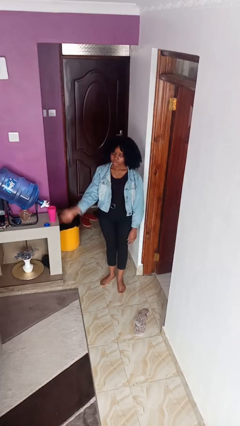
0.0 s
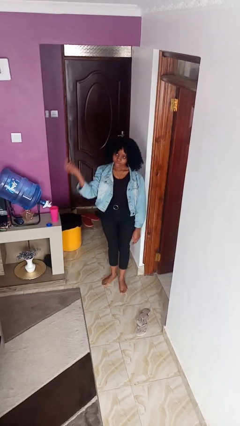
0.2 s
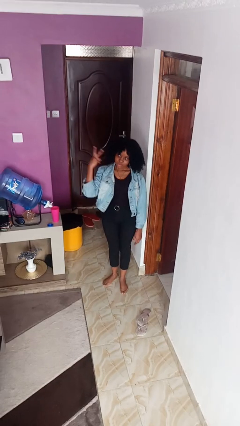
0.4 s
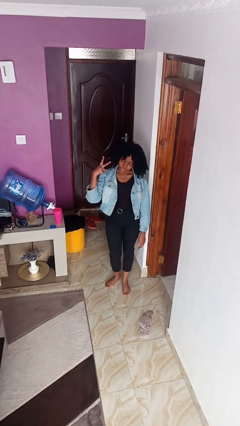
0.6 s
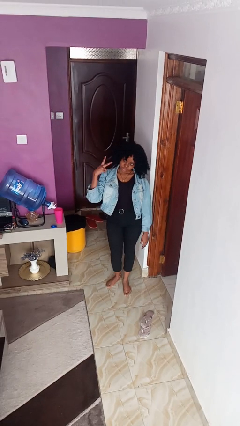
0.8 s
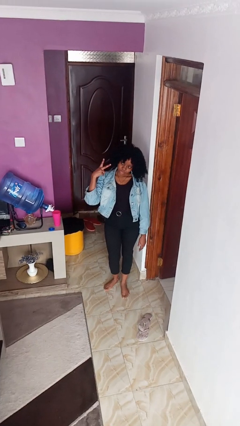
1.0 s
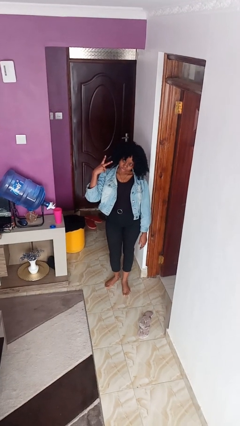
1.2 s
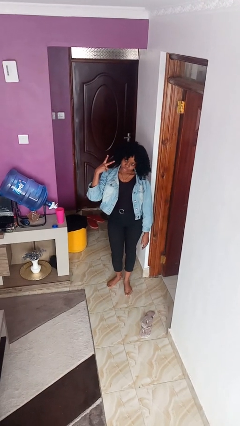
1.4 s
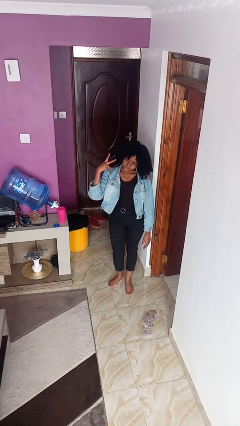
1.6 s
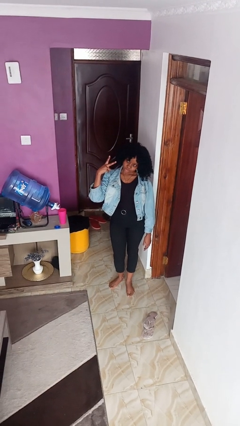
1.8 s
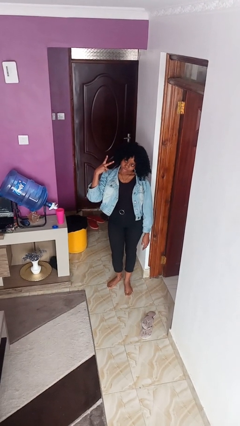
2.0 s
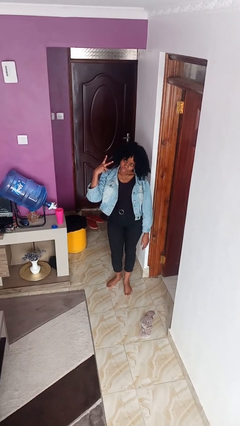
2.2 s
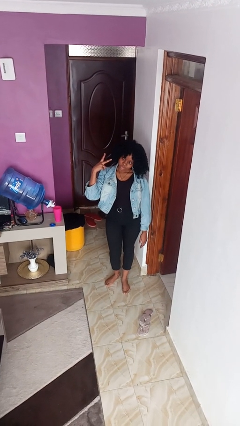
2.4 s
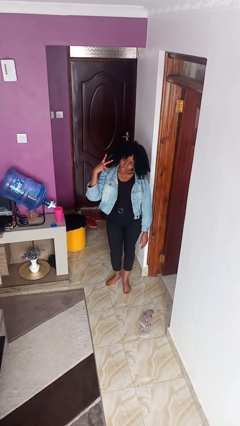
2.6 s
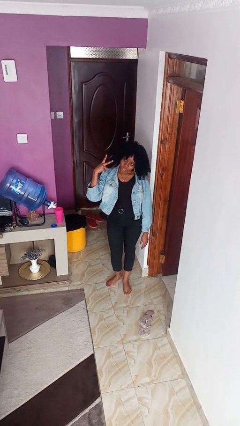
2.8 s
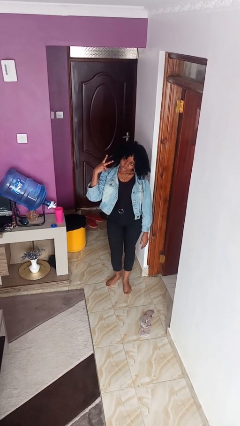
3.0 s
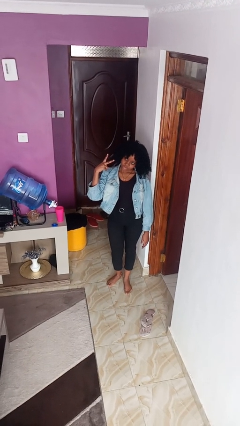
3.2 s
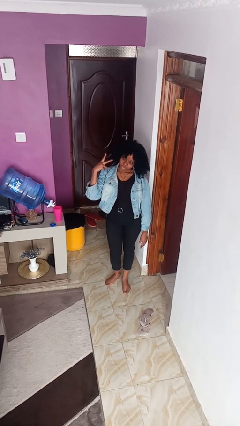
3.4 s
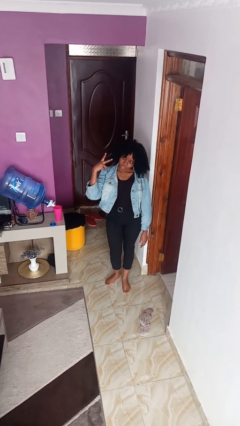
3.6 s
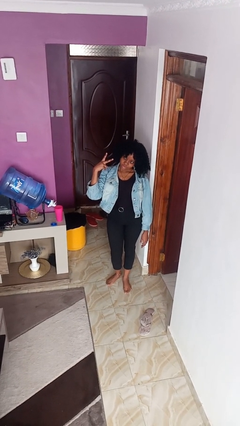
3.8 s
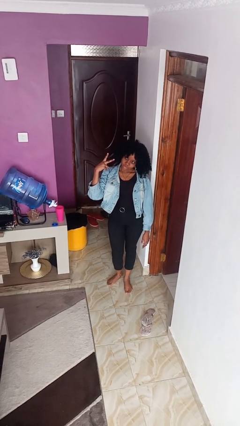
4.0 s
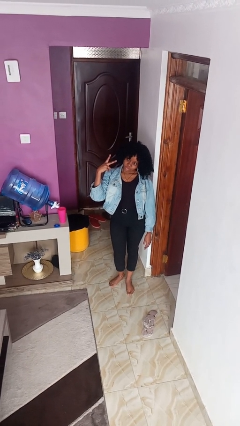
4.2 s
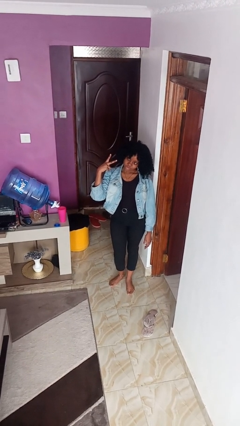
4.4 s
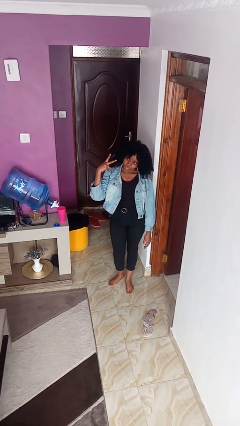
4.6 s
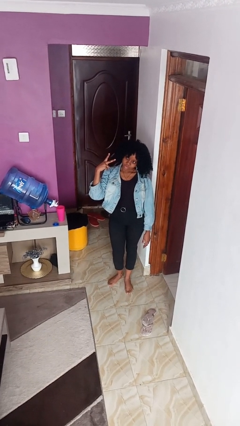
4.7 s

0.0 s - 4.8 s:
person gestures peace

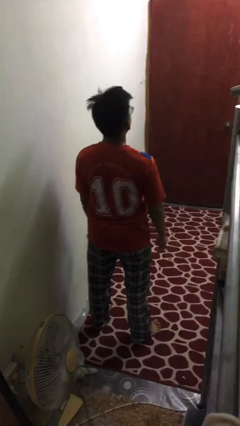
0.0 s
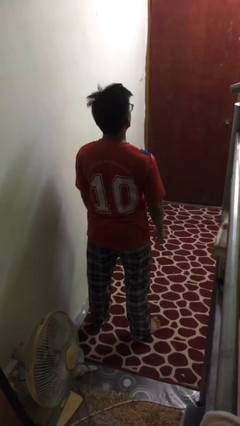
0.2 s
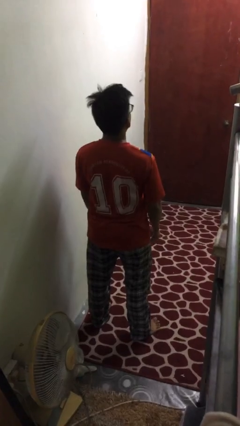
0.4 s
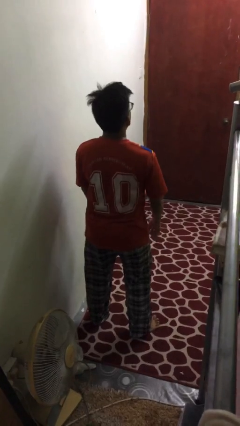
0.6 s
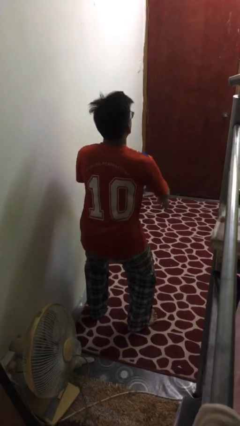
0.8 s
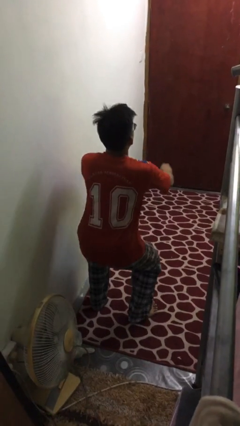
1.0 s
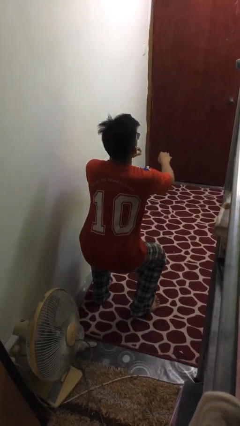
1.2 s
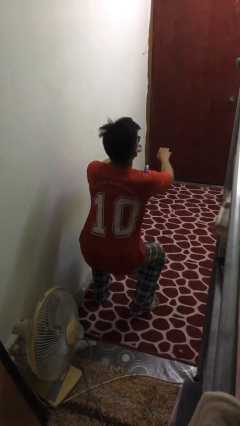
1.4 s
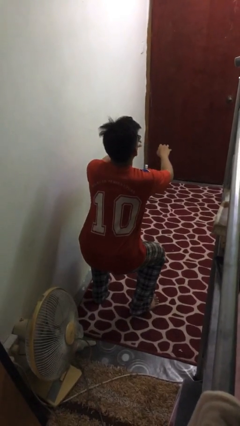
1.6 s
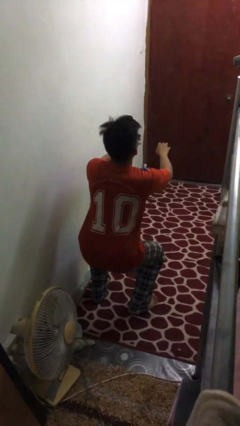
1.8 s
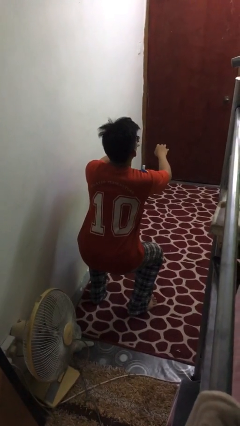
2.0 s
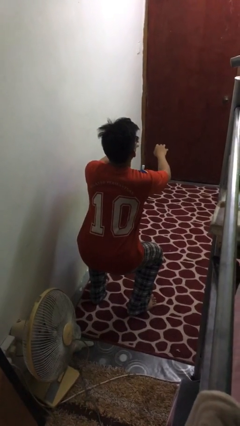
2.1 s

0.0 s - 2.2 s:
person squats

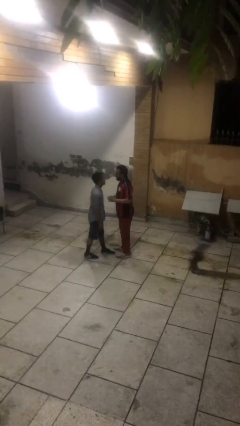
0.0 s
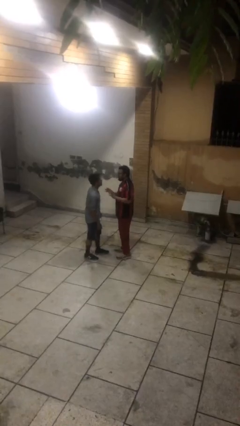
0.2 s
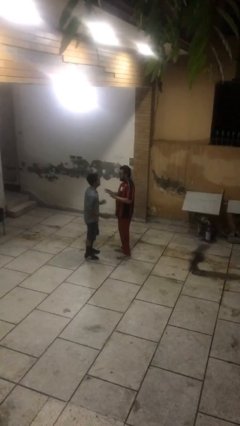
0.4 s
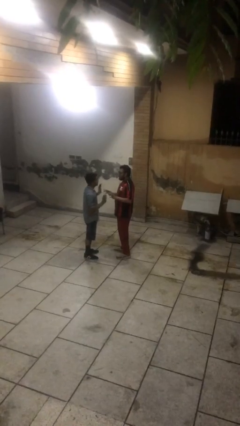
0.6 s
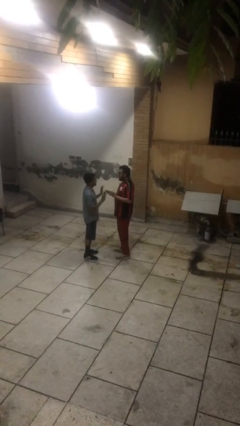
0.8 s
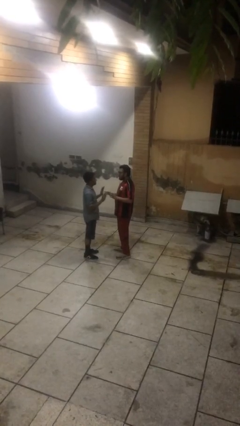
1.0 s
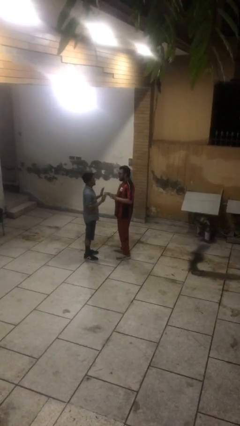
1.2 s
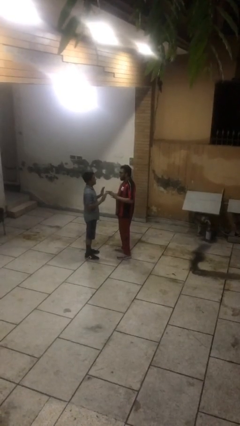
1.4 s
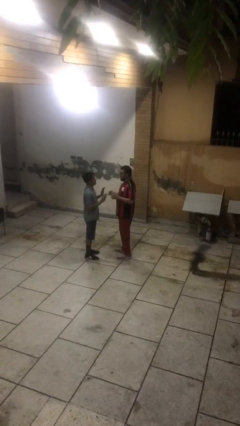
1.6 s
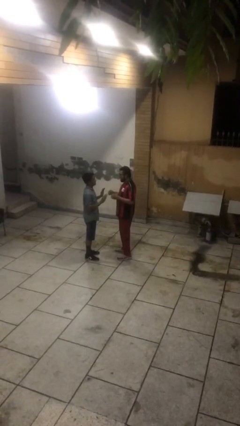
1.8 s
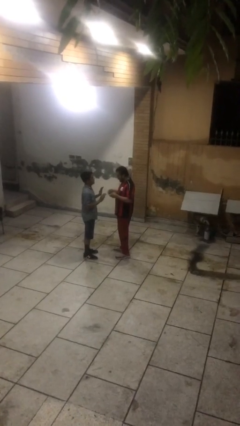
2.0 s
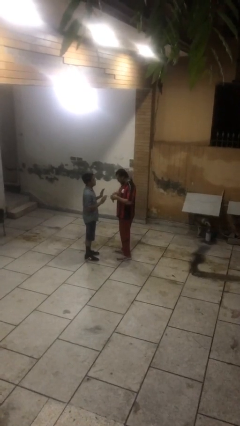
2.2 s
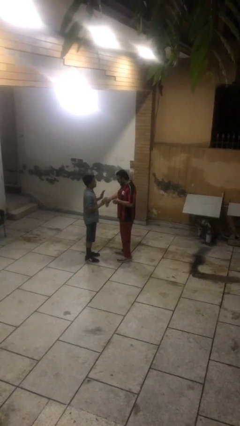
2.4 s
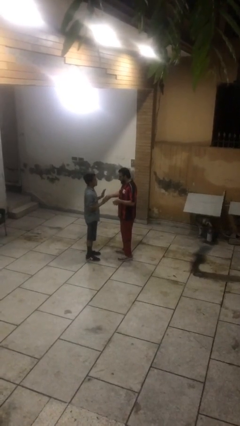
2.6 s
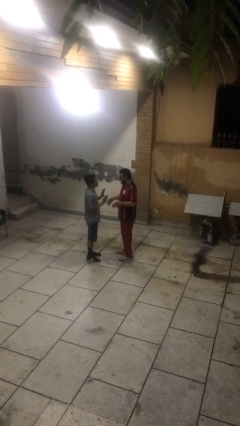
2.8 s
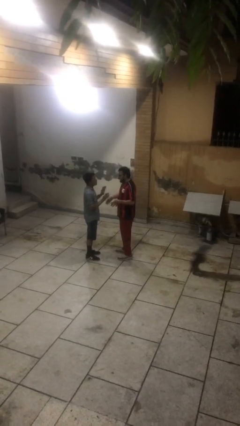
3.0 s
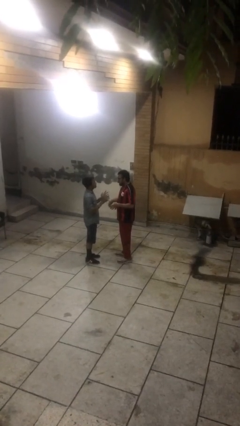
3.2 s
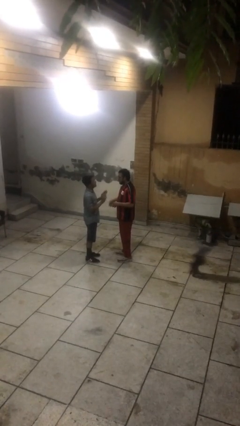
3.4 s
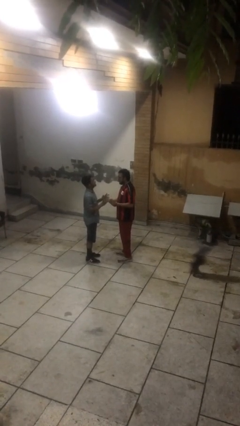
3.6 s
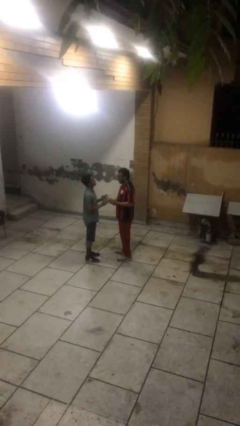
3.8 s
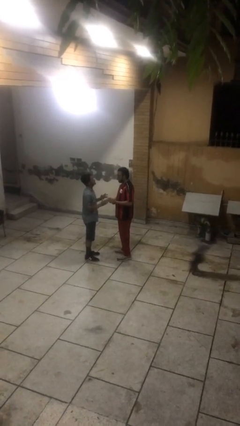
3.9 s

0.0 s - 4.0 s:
person talks to person

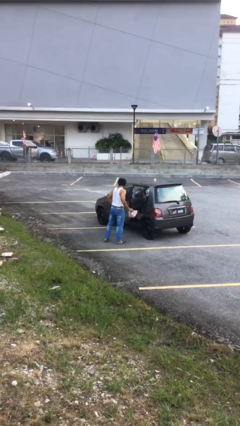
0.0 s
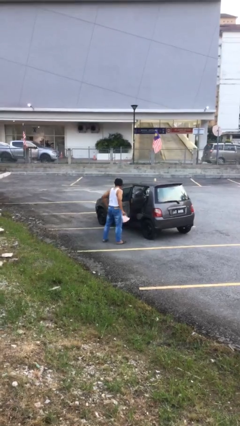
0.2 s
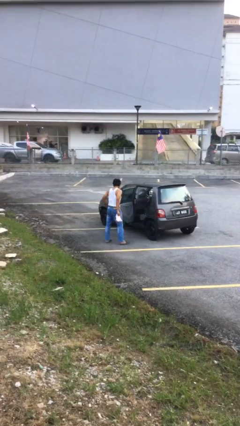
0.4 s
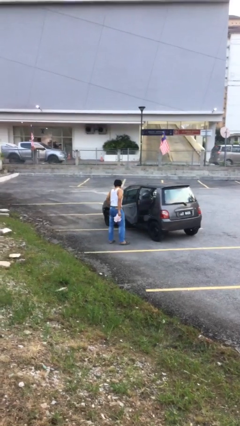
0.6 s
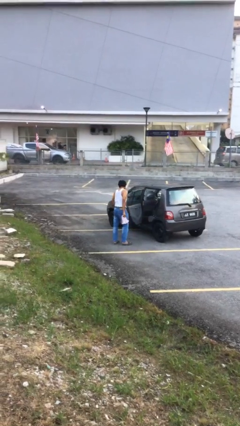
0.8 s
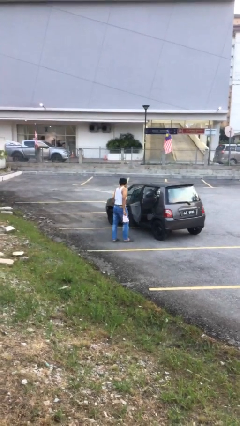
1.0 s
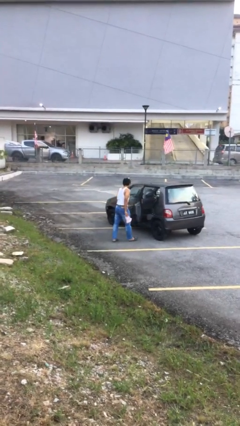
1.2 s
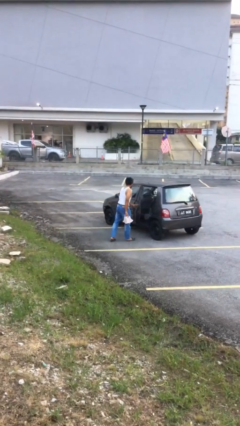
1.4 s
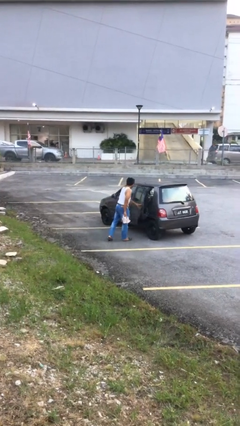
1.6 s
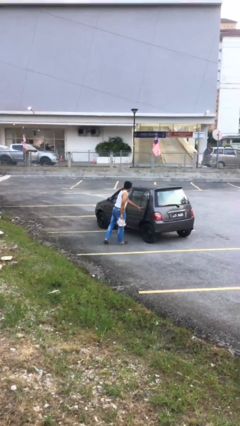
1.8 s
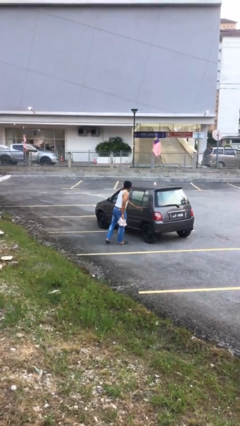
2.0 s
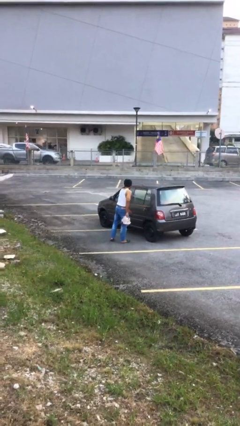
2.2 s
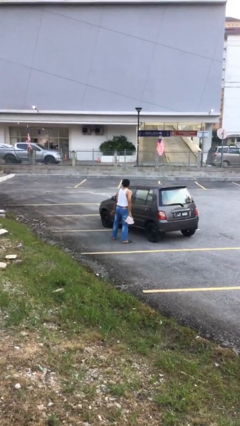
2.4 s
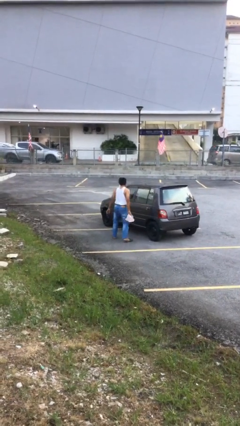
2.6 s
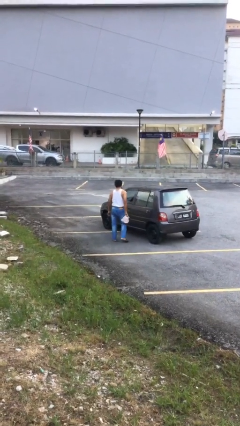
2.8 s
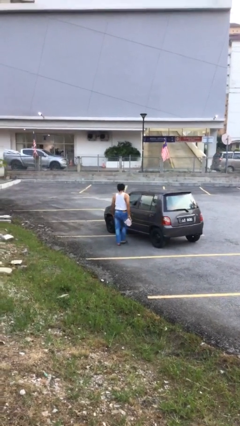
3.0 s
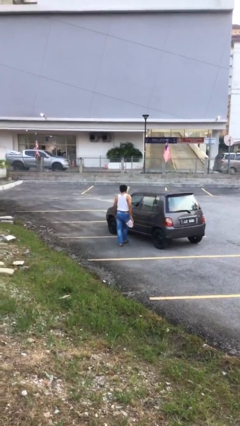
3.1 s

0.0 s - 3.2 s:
person closes car door

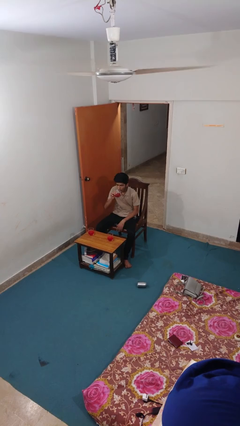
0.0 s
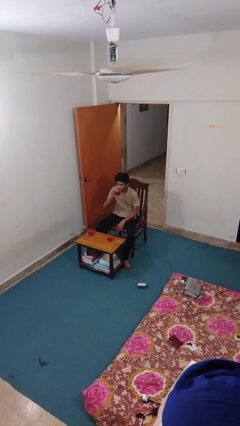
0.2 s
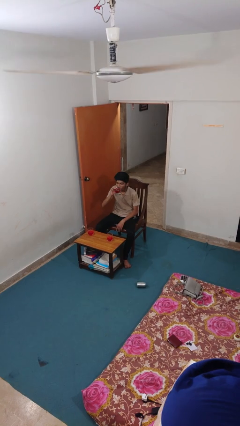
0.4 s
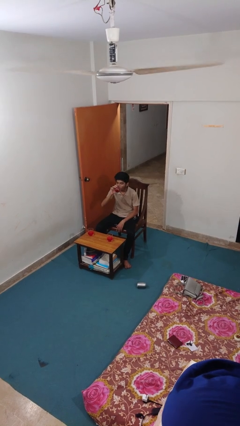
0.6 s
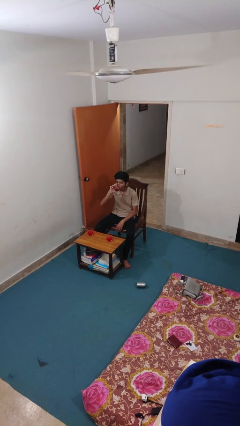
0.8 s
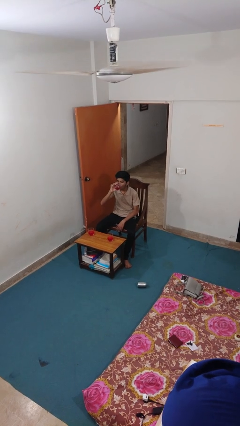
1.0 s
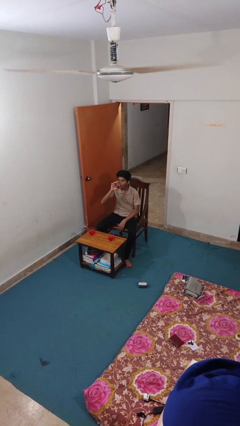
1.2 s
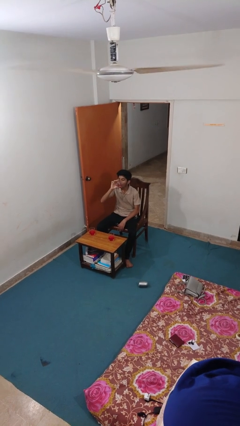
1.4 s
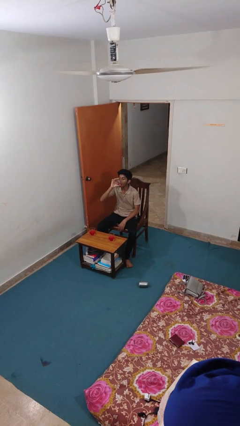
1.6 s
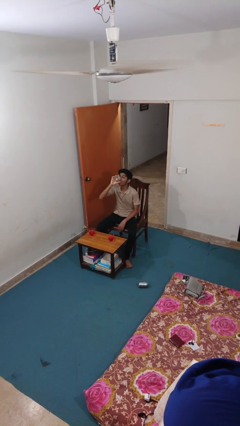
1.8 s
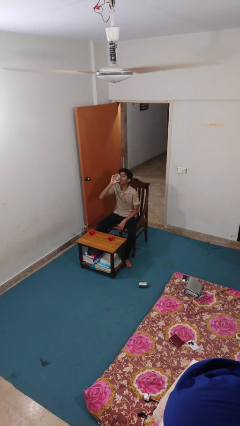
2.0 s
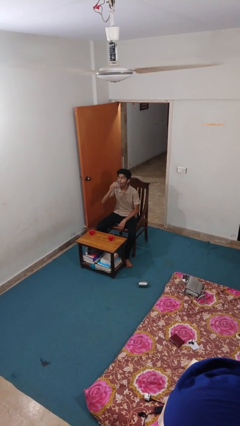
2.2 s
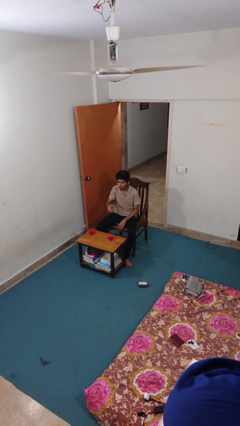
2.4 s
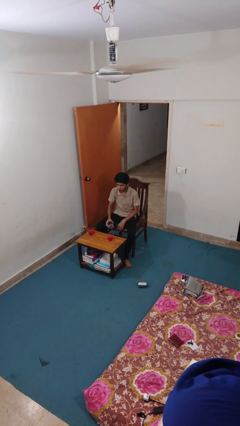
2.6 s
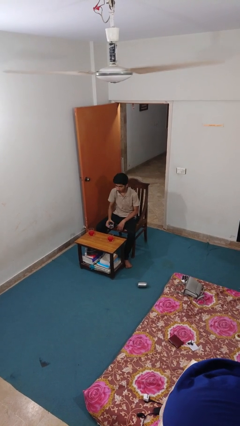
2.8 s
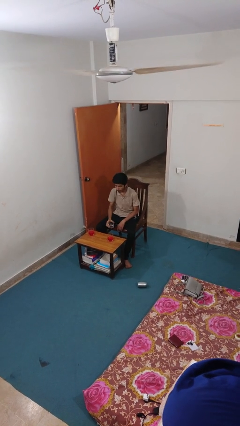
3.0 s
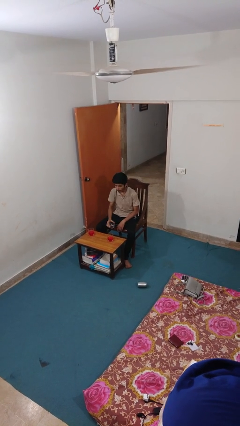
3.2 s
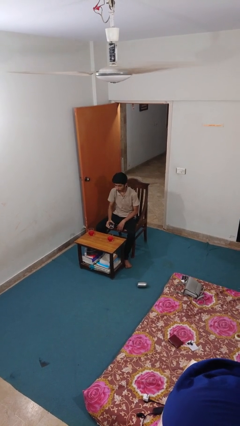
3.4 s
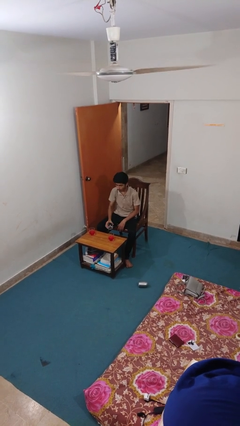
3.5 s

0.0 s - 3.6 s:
person drinks from shotglass
